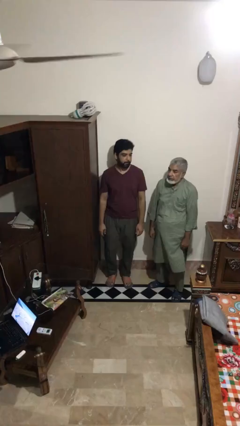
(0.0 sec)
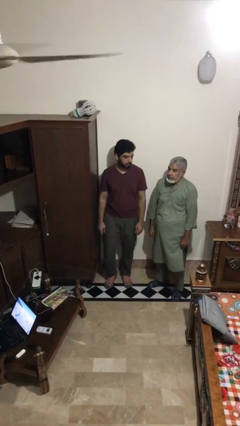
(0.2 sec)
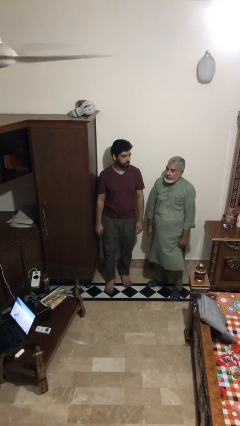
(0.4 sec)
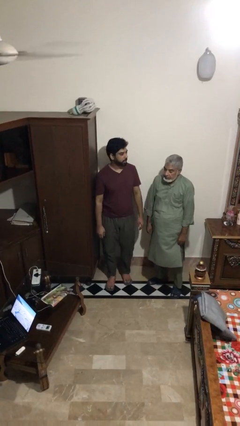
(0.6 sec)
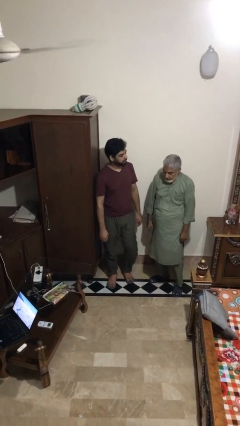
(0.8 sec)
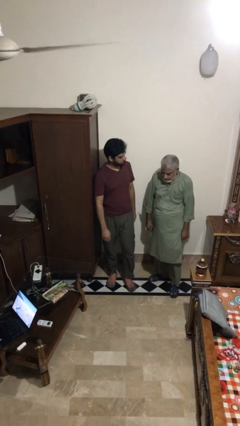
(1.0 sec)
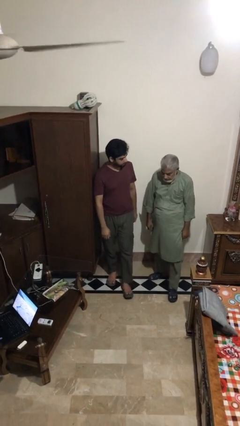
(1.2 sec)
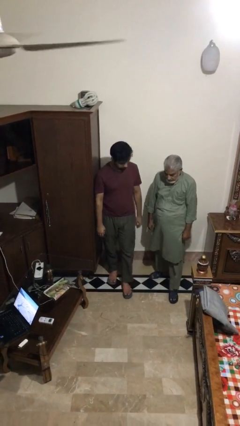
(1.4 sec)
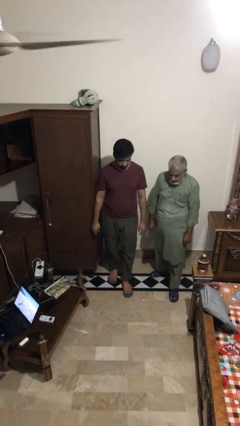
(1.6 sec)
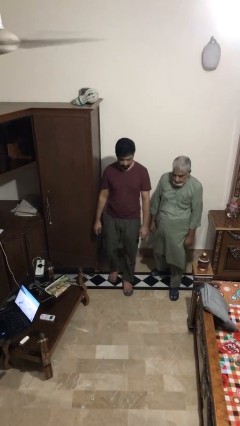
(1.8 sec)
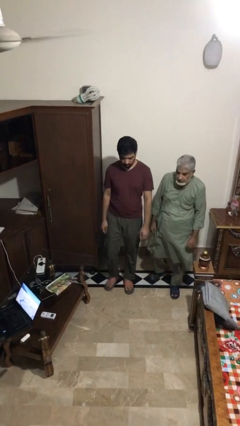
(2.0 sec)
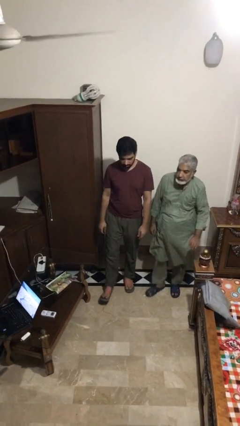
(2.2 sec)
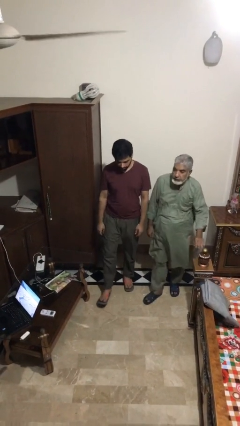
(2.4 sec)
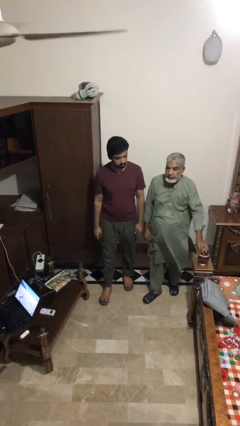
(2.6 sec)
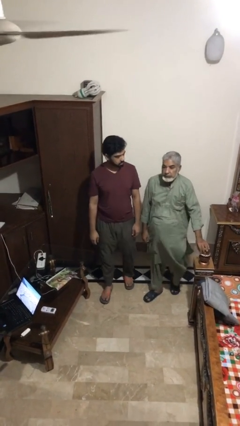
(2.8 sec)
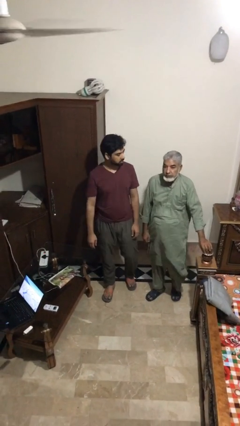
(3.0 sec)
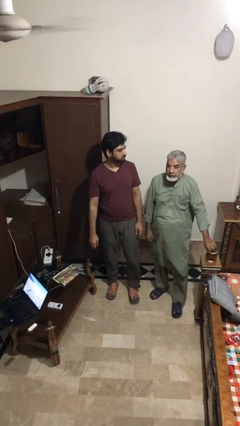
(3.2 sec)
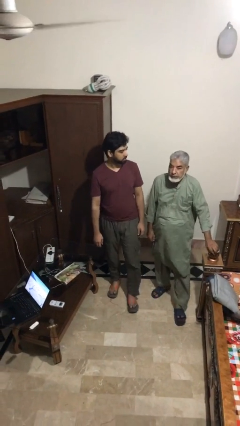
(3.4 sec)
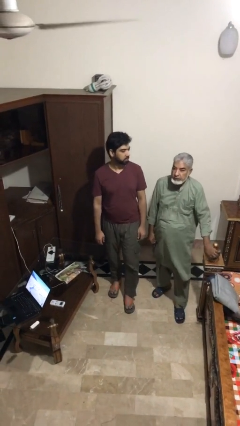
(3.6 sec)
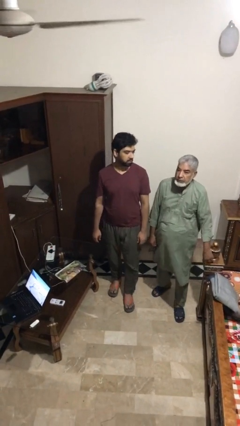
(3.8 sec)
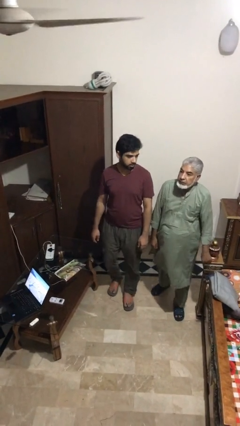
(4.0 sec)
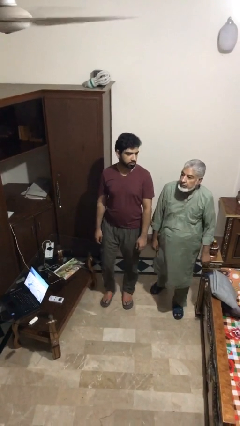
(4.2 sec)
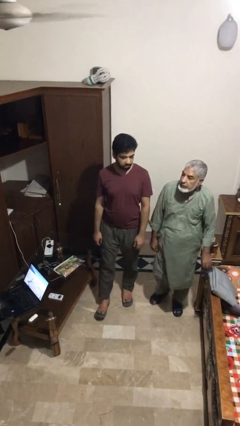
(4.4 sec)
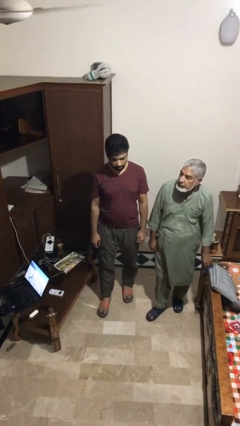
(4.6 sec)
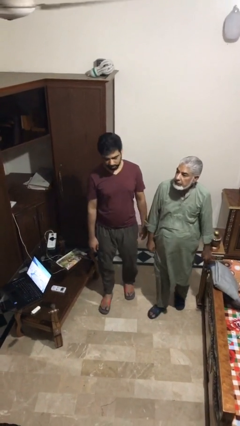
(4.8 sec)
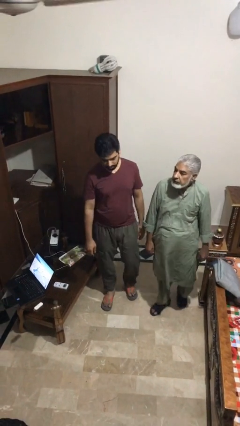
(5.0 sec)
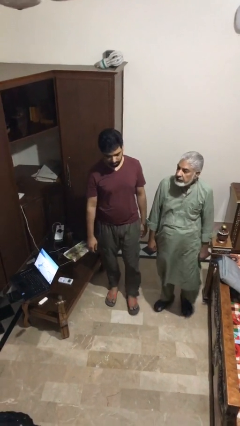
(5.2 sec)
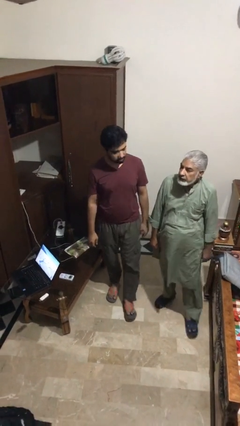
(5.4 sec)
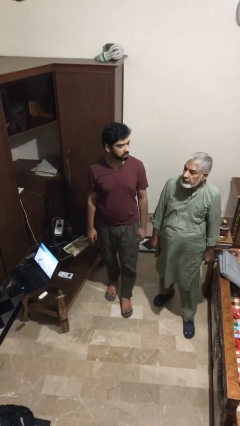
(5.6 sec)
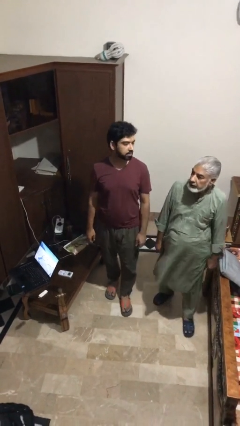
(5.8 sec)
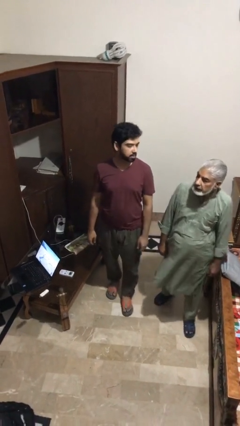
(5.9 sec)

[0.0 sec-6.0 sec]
person talks to person

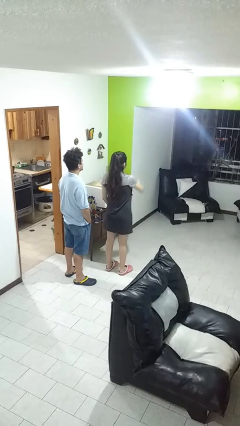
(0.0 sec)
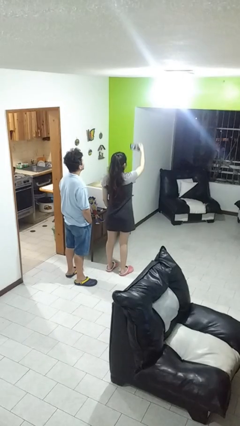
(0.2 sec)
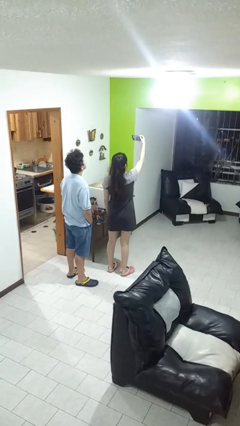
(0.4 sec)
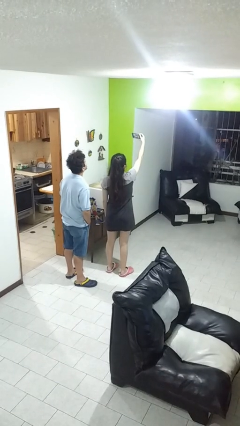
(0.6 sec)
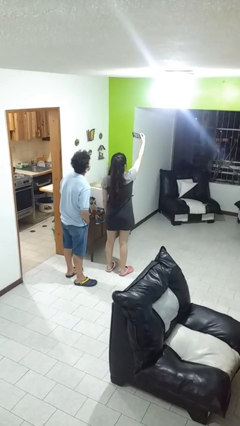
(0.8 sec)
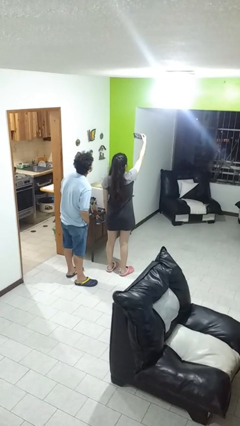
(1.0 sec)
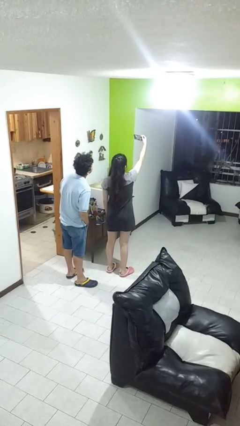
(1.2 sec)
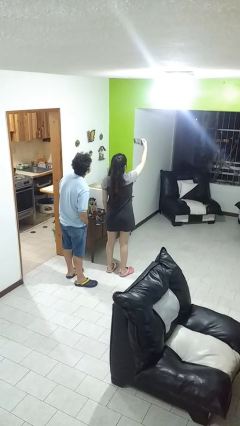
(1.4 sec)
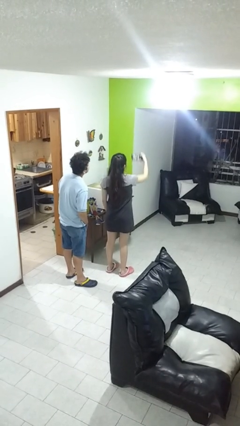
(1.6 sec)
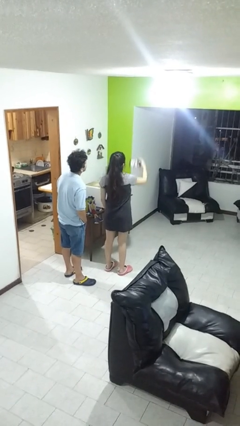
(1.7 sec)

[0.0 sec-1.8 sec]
person takes selfie with person

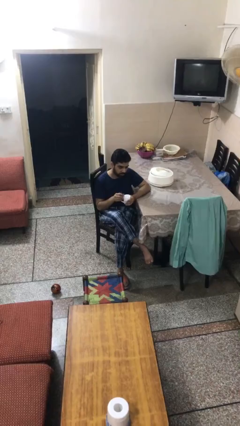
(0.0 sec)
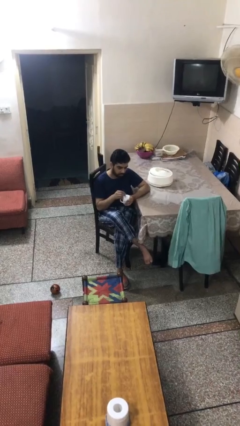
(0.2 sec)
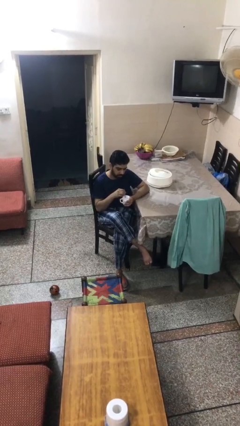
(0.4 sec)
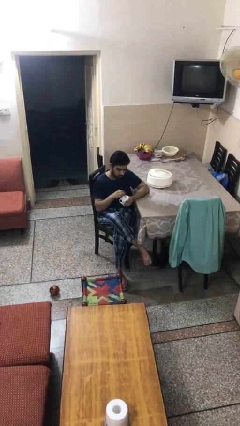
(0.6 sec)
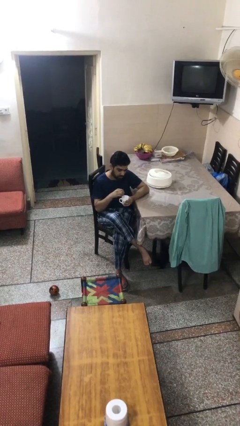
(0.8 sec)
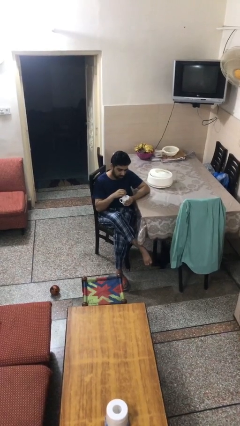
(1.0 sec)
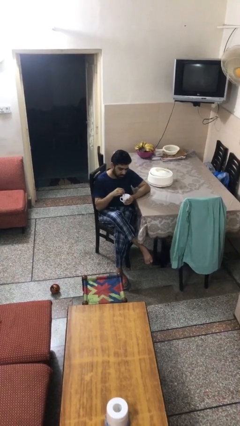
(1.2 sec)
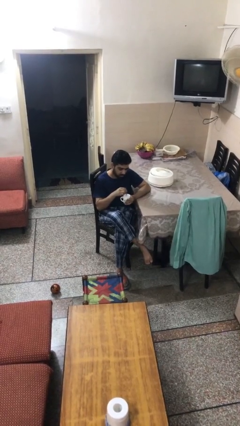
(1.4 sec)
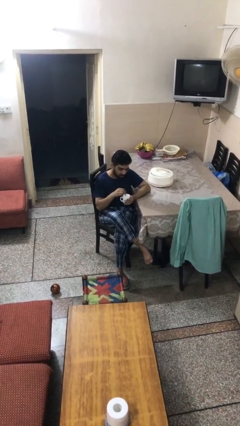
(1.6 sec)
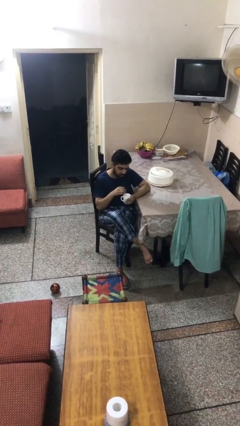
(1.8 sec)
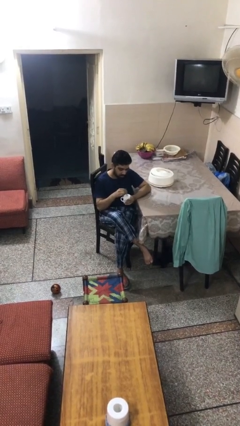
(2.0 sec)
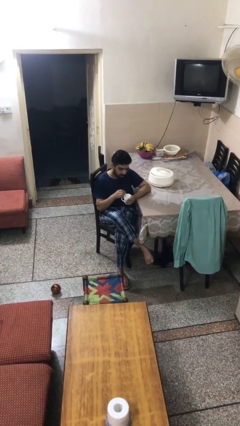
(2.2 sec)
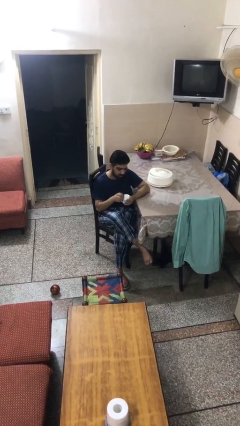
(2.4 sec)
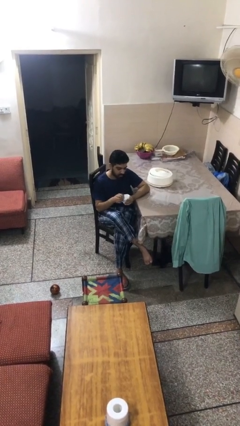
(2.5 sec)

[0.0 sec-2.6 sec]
person stirs mug

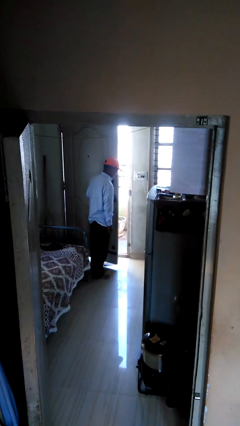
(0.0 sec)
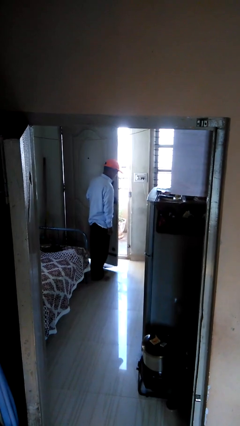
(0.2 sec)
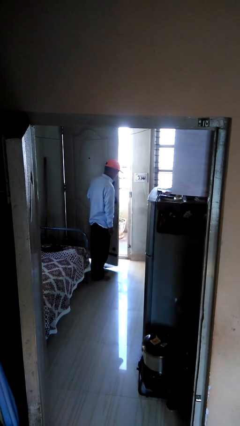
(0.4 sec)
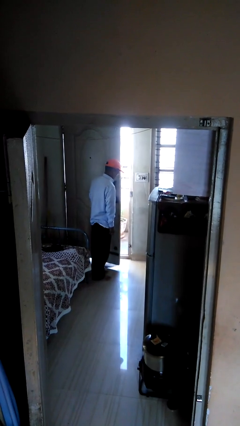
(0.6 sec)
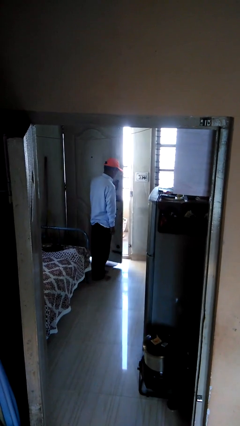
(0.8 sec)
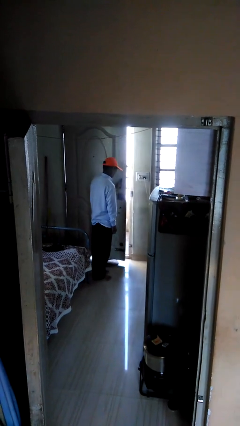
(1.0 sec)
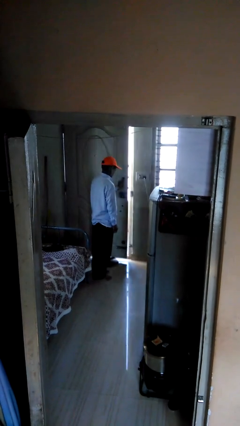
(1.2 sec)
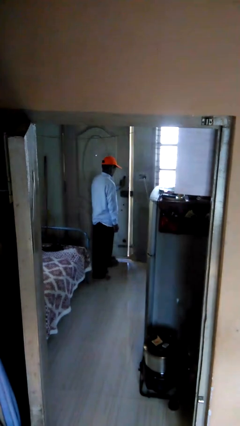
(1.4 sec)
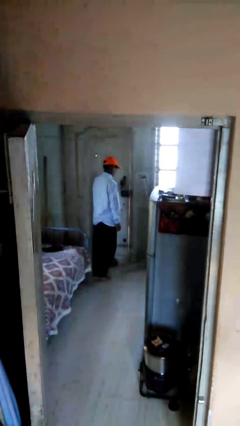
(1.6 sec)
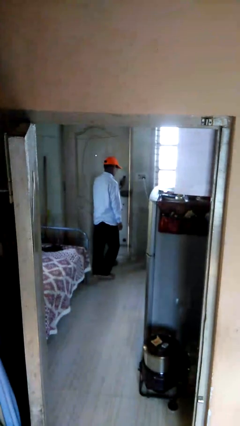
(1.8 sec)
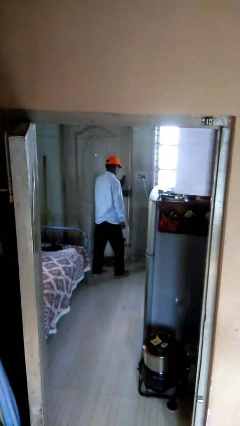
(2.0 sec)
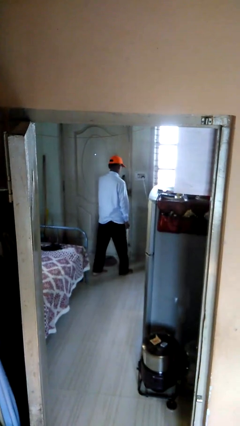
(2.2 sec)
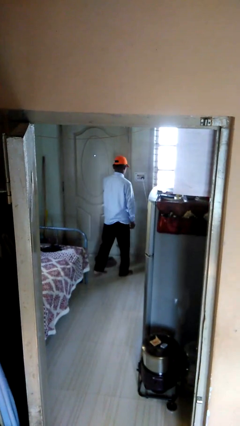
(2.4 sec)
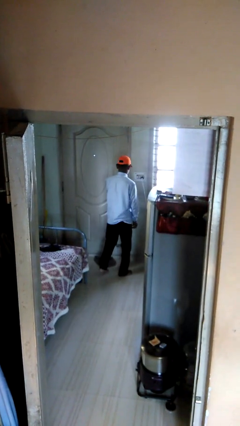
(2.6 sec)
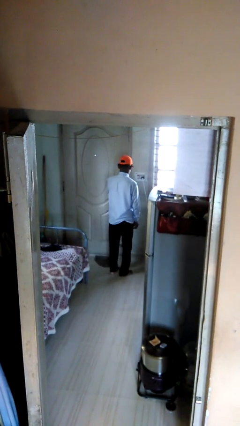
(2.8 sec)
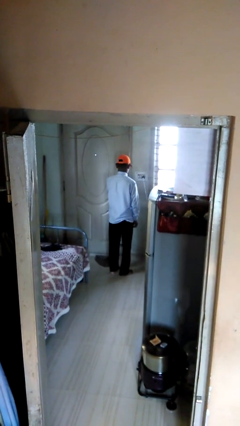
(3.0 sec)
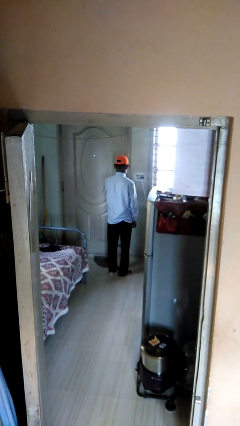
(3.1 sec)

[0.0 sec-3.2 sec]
person closes facility door

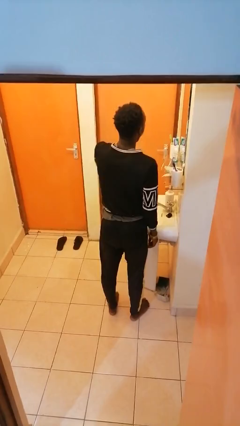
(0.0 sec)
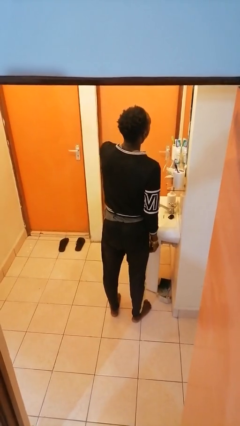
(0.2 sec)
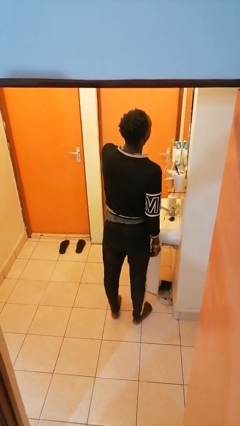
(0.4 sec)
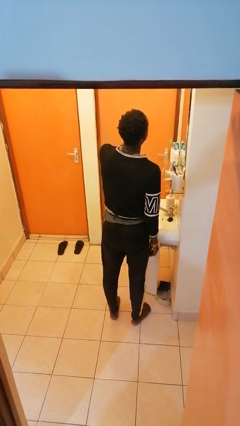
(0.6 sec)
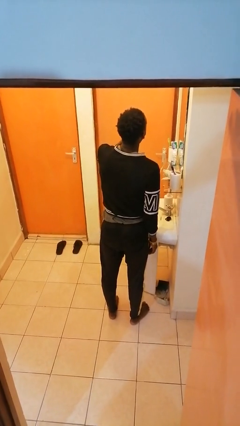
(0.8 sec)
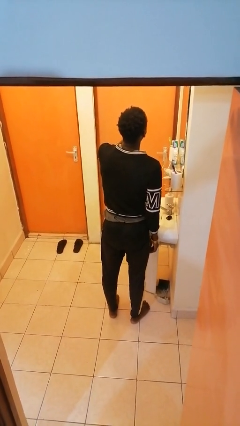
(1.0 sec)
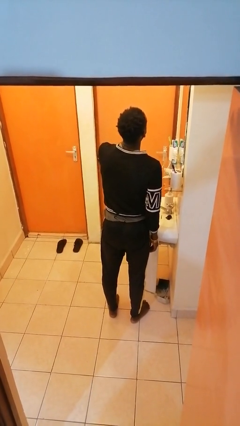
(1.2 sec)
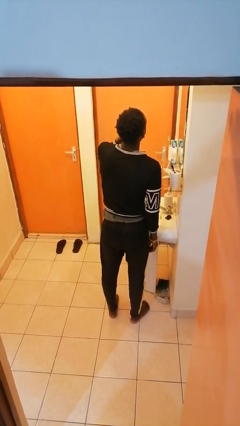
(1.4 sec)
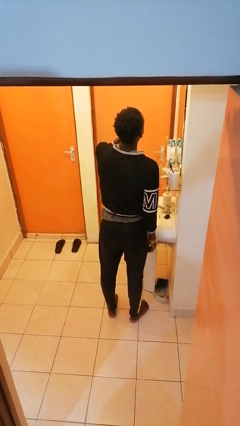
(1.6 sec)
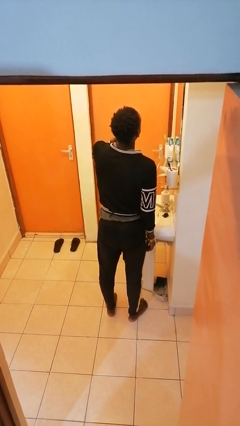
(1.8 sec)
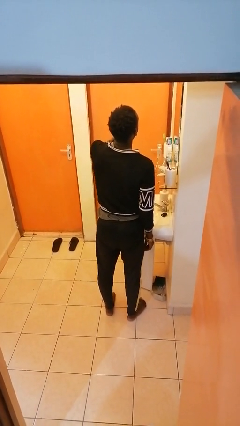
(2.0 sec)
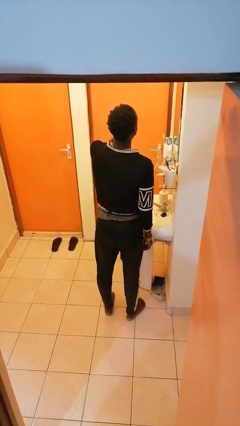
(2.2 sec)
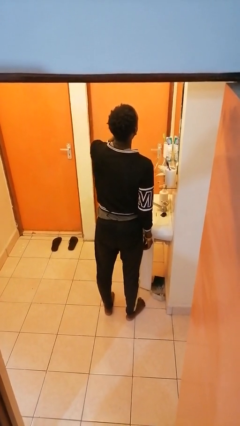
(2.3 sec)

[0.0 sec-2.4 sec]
person brushes teeth

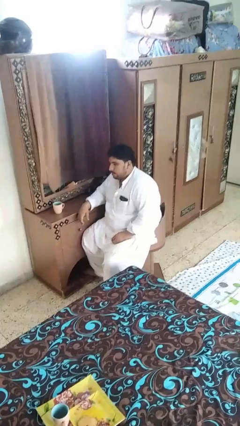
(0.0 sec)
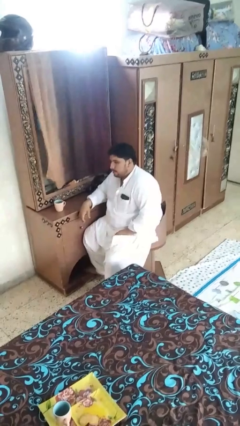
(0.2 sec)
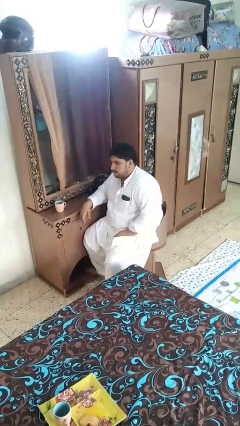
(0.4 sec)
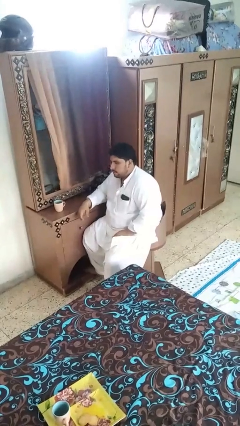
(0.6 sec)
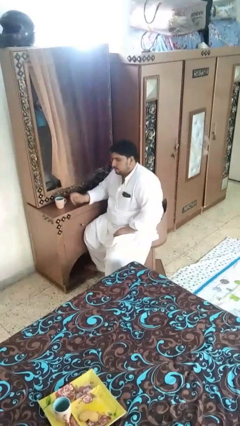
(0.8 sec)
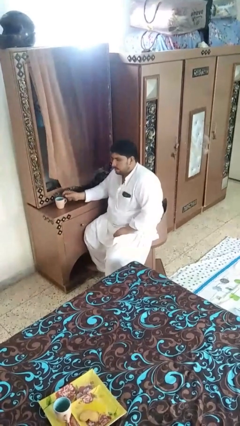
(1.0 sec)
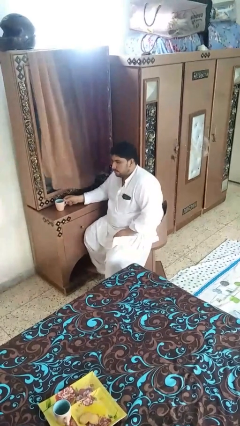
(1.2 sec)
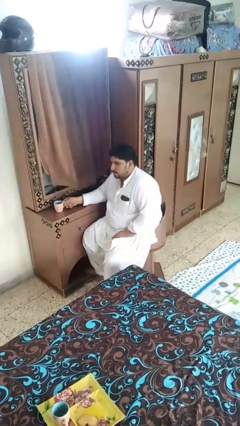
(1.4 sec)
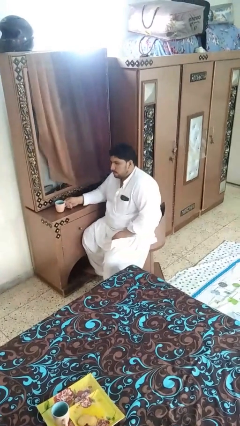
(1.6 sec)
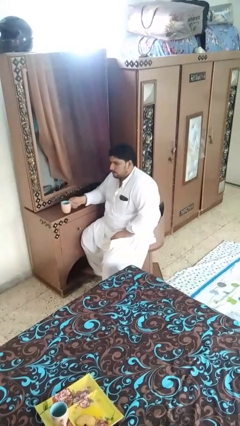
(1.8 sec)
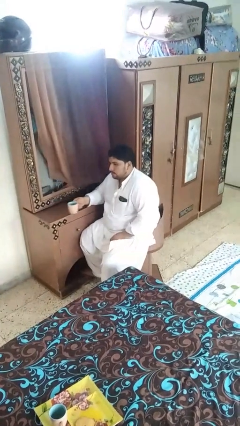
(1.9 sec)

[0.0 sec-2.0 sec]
person picks up object from table
